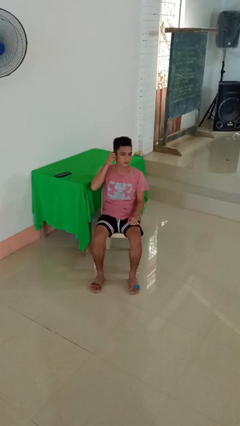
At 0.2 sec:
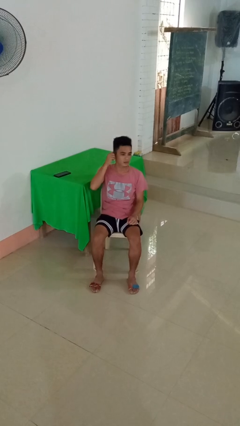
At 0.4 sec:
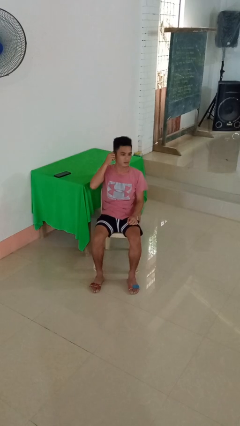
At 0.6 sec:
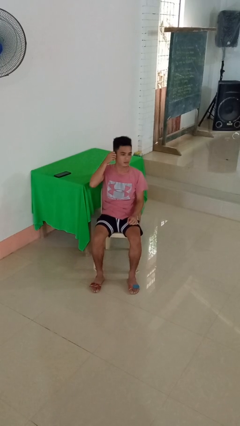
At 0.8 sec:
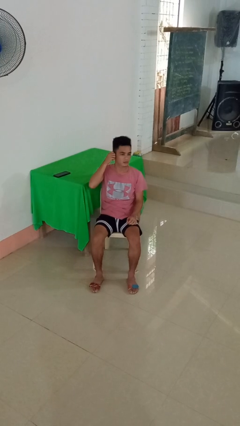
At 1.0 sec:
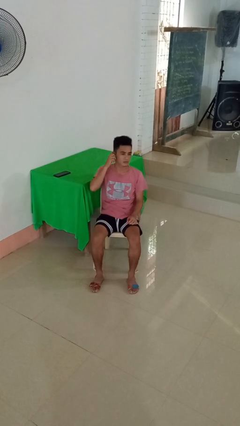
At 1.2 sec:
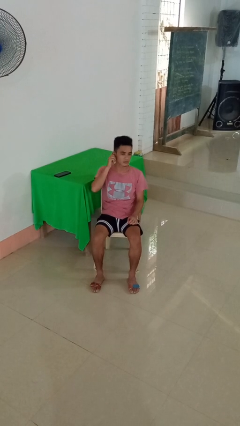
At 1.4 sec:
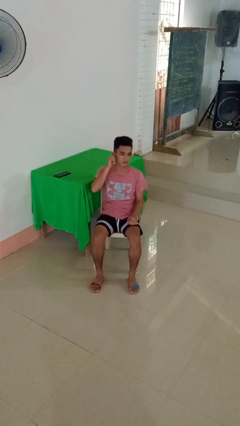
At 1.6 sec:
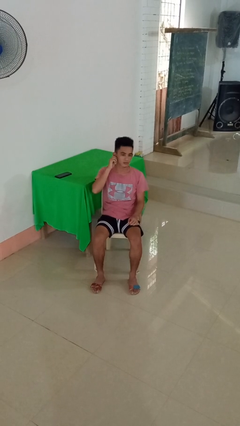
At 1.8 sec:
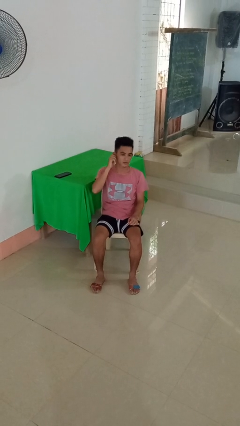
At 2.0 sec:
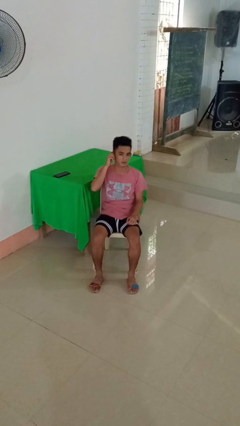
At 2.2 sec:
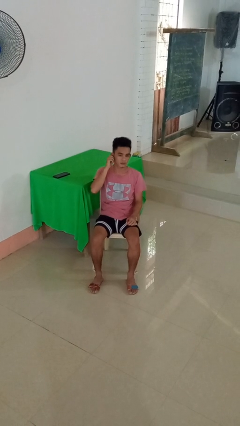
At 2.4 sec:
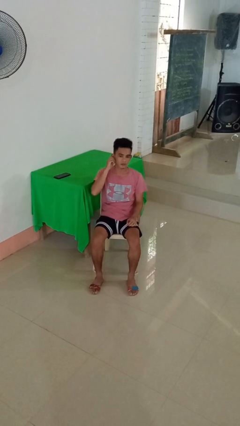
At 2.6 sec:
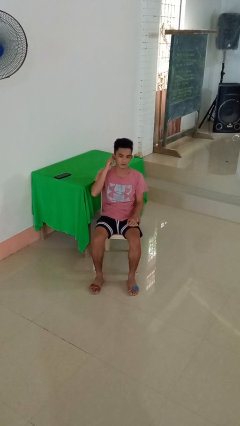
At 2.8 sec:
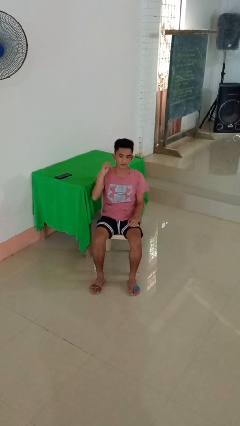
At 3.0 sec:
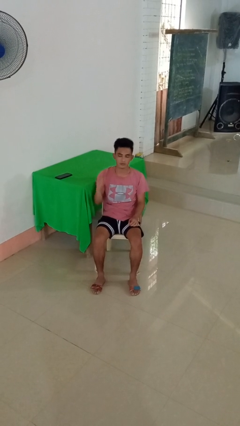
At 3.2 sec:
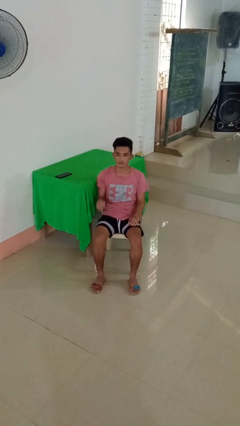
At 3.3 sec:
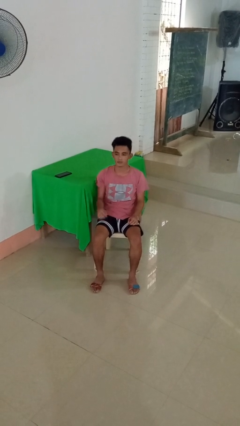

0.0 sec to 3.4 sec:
person touches earlobe

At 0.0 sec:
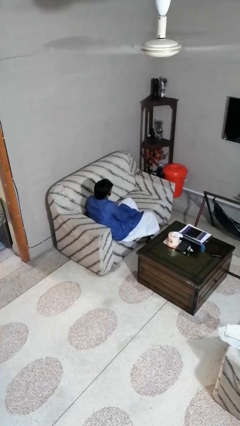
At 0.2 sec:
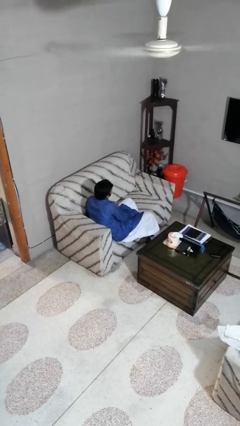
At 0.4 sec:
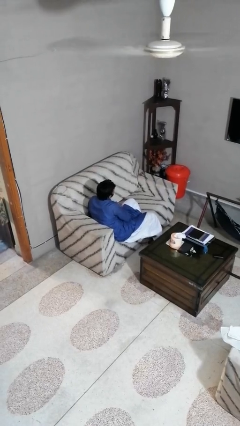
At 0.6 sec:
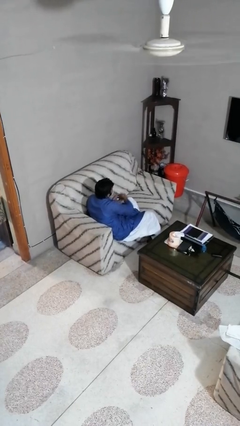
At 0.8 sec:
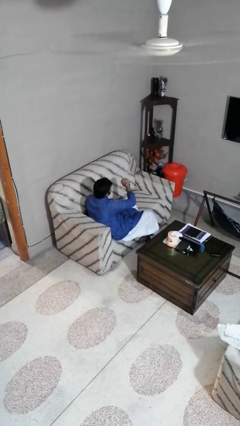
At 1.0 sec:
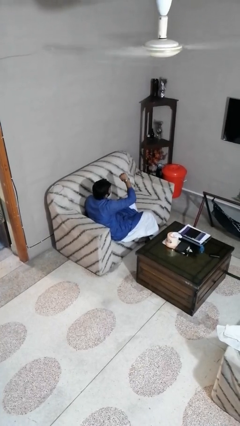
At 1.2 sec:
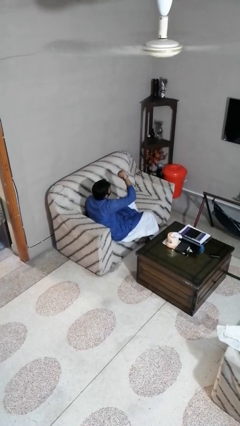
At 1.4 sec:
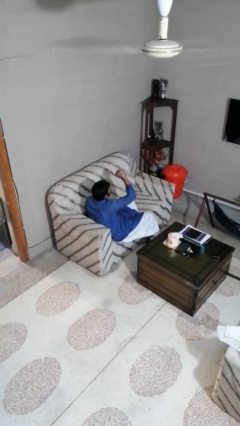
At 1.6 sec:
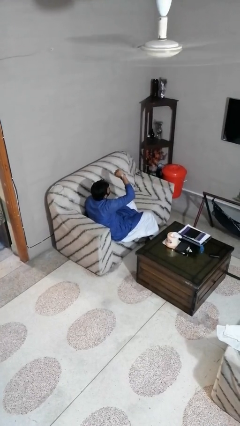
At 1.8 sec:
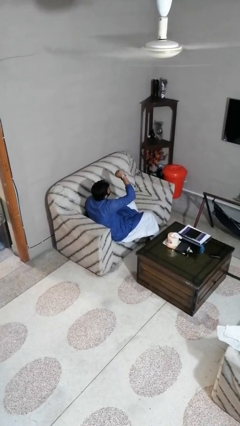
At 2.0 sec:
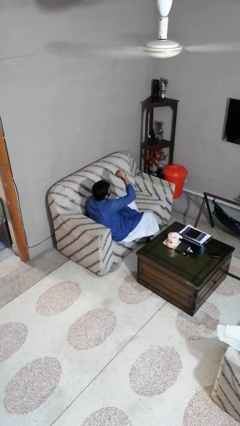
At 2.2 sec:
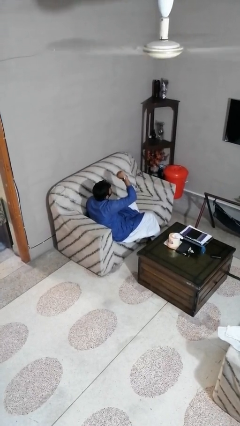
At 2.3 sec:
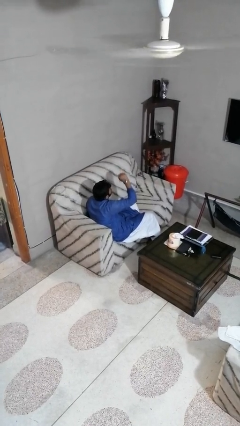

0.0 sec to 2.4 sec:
person looks at wristwatch

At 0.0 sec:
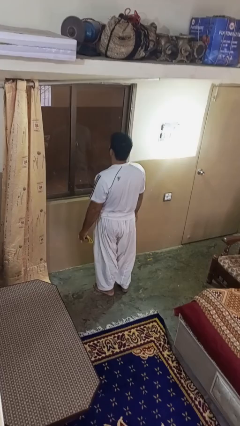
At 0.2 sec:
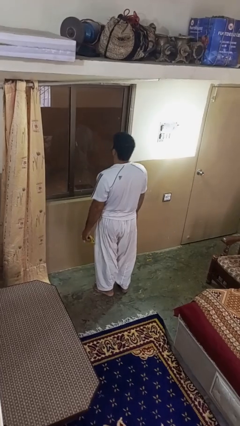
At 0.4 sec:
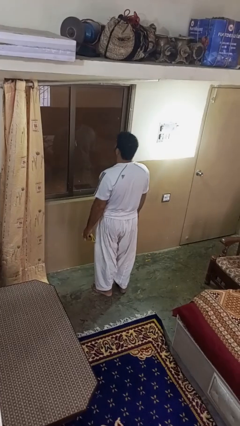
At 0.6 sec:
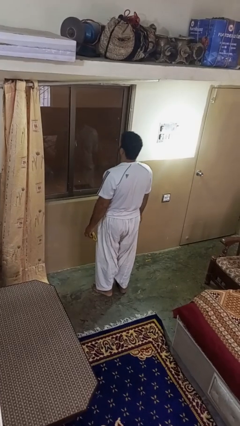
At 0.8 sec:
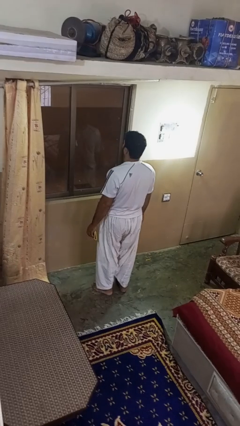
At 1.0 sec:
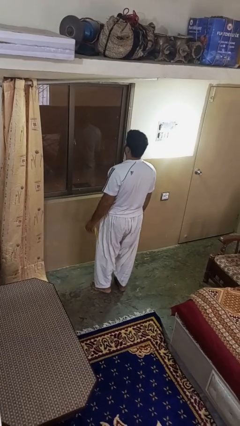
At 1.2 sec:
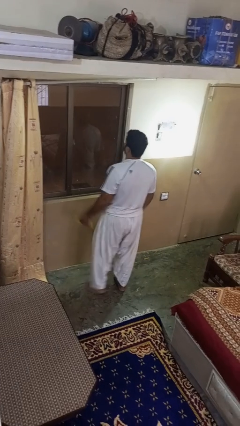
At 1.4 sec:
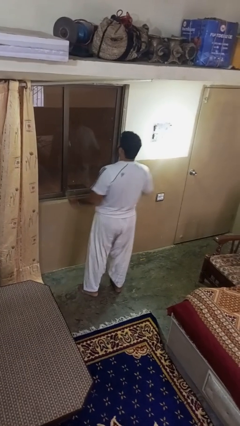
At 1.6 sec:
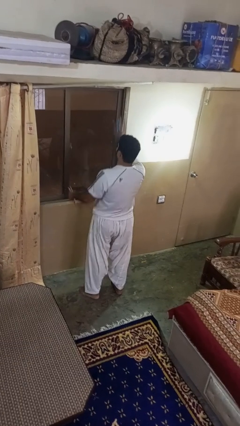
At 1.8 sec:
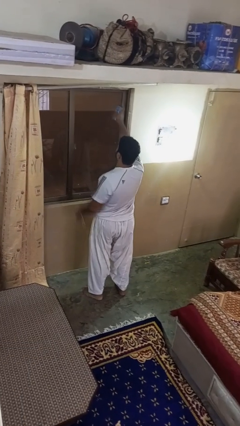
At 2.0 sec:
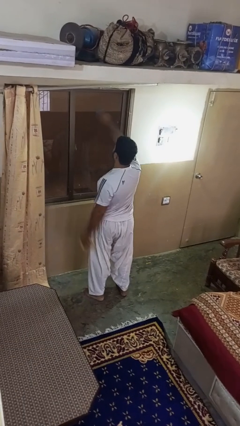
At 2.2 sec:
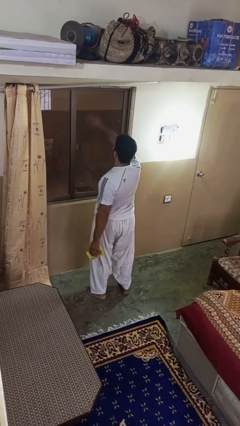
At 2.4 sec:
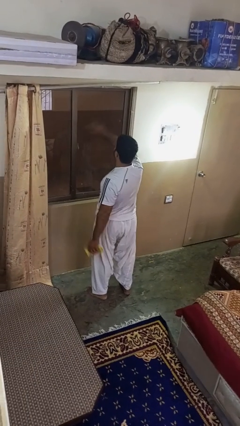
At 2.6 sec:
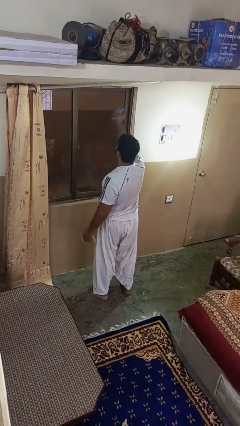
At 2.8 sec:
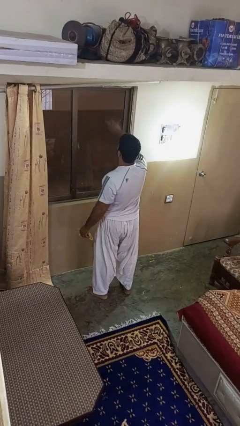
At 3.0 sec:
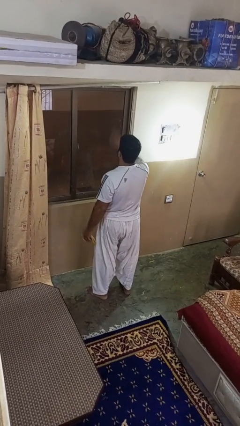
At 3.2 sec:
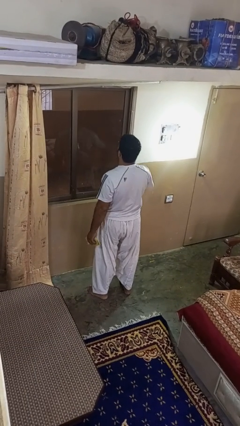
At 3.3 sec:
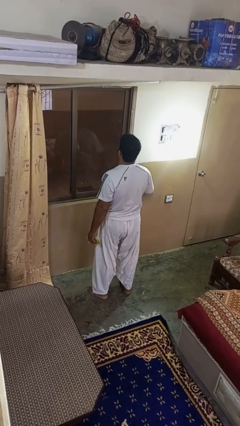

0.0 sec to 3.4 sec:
person sprays from bottle

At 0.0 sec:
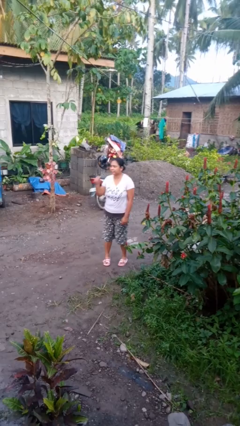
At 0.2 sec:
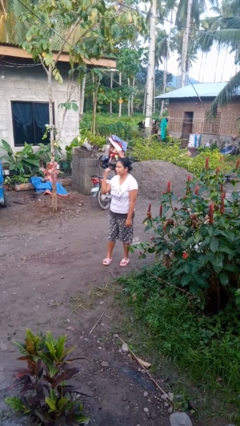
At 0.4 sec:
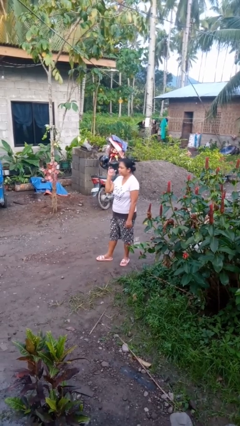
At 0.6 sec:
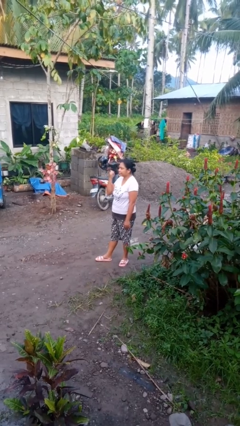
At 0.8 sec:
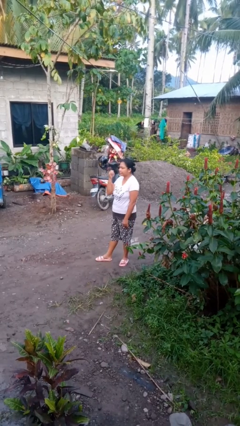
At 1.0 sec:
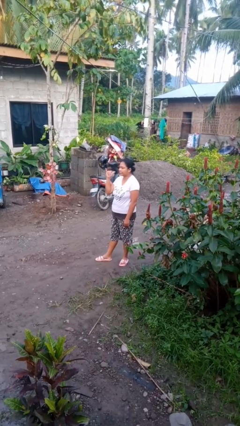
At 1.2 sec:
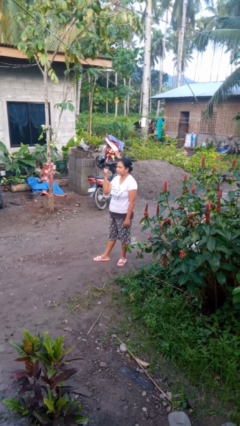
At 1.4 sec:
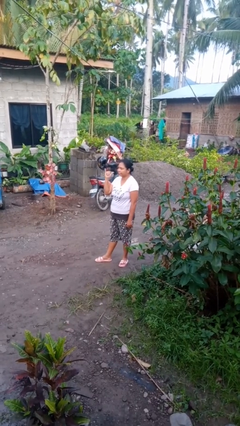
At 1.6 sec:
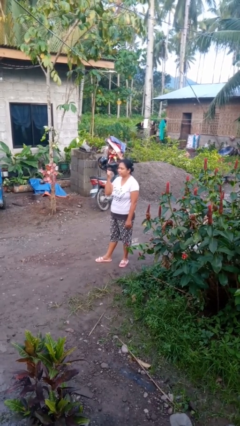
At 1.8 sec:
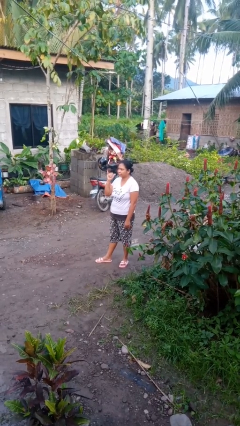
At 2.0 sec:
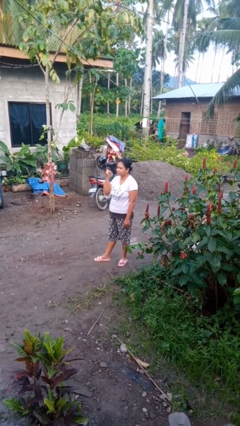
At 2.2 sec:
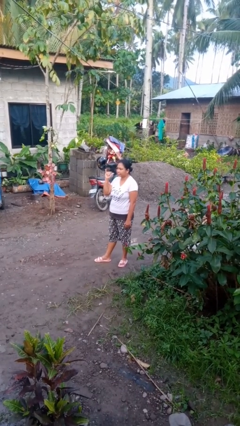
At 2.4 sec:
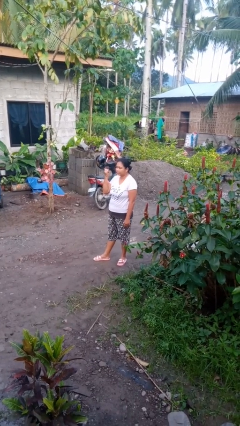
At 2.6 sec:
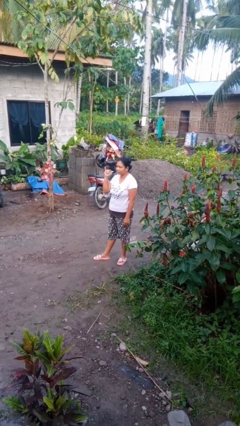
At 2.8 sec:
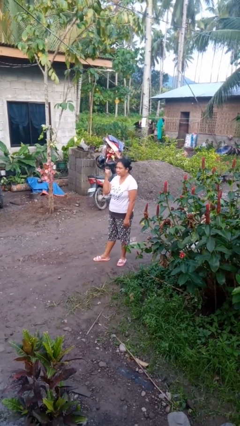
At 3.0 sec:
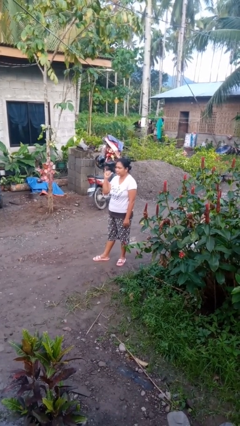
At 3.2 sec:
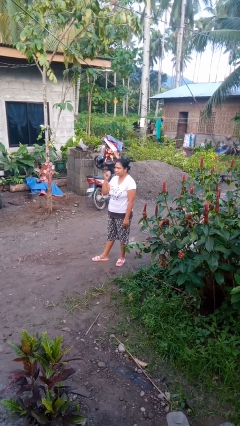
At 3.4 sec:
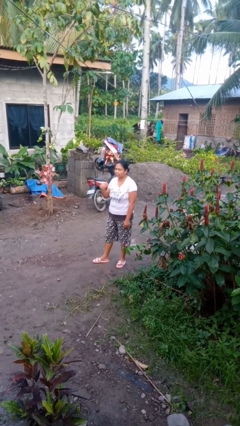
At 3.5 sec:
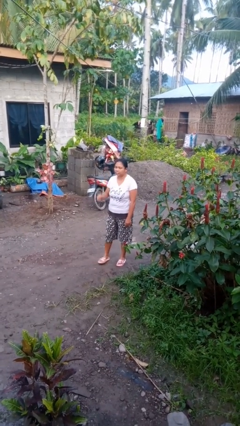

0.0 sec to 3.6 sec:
person gestures hang loose

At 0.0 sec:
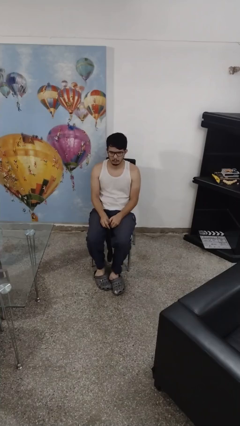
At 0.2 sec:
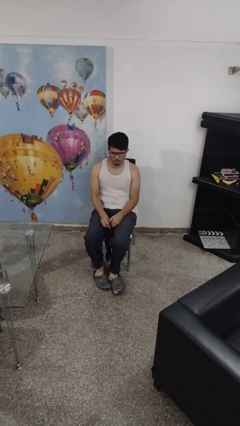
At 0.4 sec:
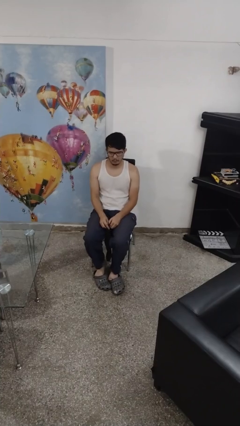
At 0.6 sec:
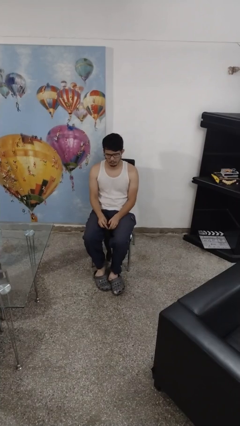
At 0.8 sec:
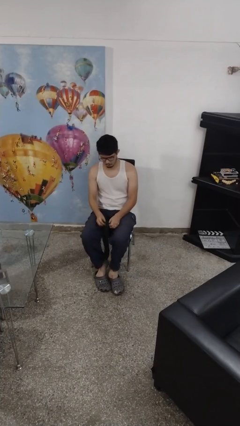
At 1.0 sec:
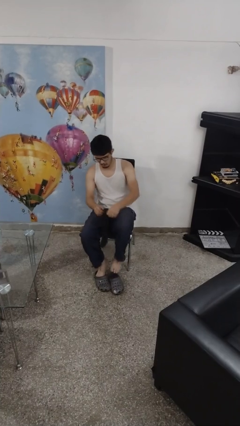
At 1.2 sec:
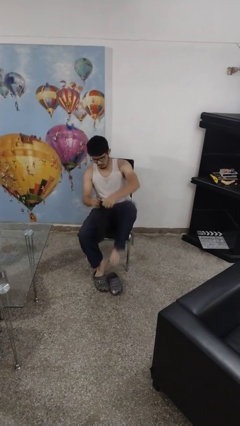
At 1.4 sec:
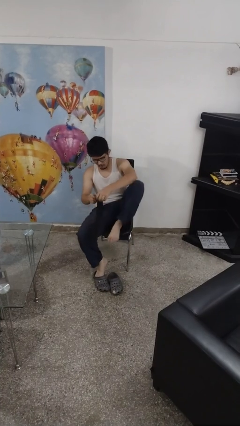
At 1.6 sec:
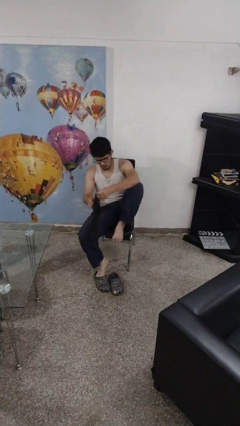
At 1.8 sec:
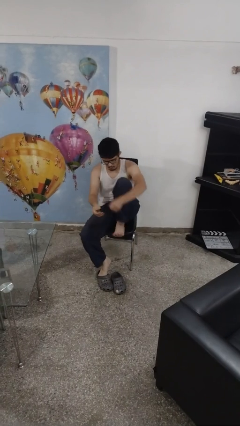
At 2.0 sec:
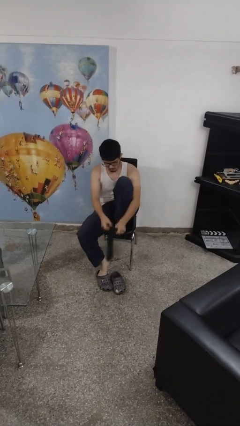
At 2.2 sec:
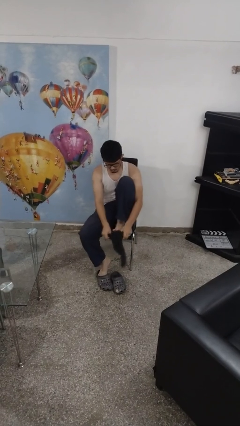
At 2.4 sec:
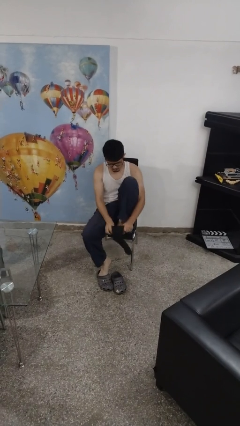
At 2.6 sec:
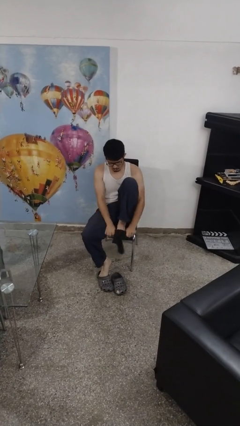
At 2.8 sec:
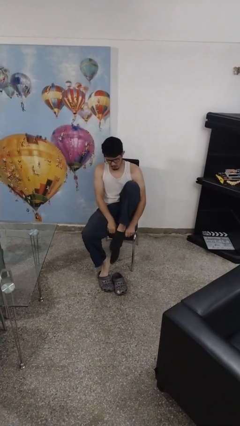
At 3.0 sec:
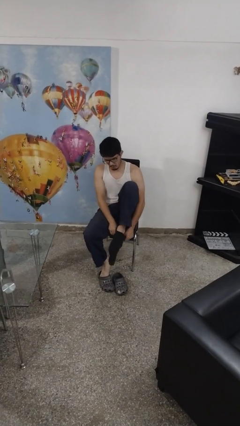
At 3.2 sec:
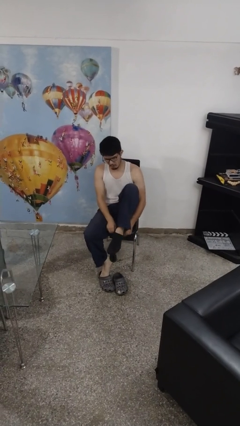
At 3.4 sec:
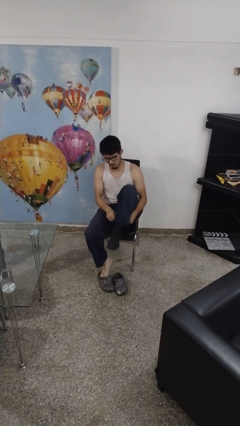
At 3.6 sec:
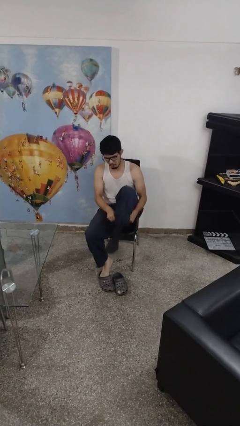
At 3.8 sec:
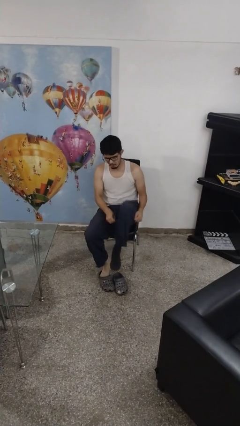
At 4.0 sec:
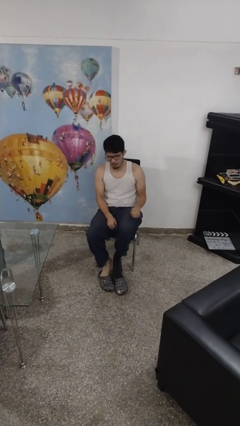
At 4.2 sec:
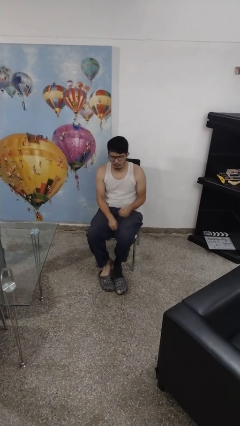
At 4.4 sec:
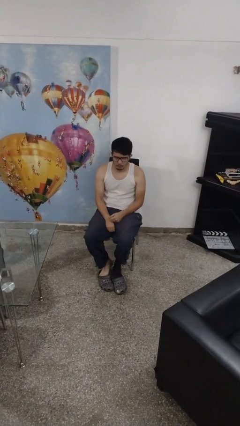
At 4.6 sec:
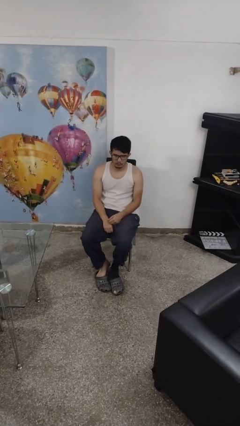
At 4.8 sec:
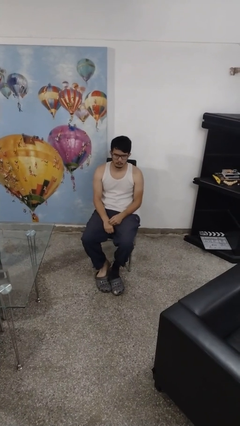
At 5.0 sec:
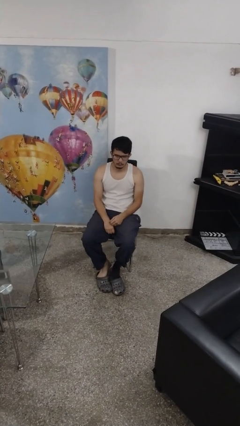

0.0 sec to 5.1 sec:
person puts on socks
